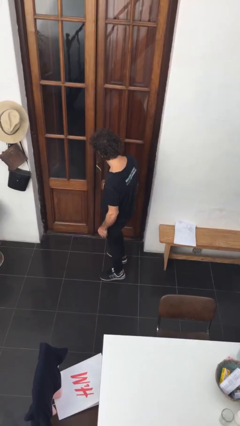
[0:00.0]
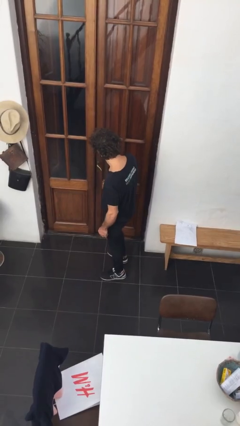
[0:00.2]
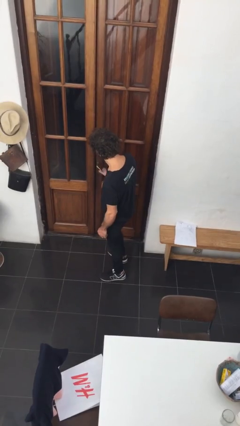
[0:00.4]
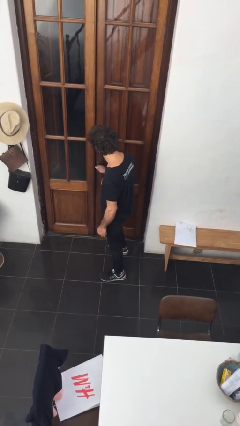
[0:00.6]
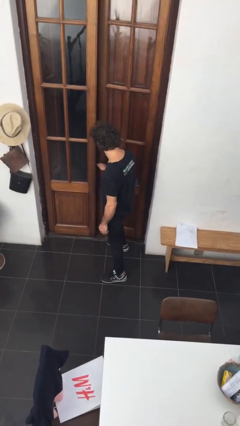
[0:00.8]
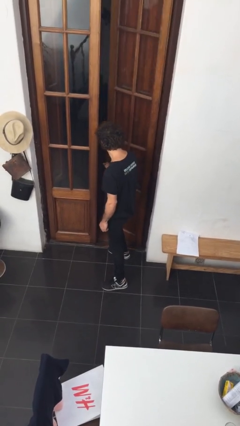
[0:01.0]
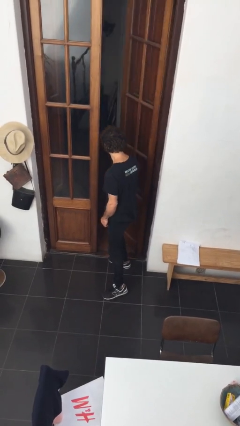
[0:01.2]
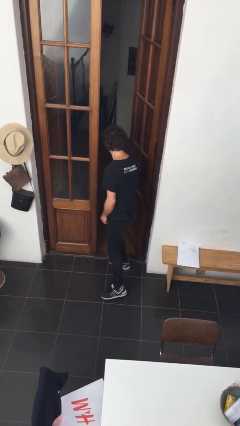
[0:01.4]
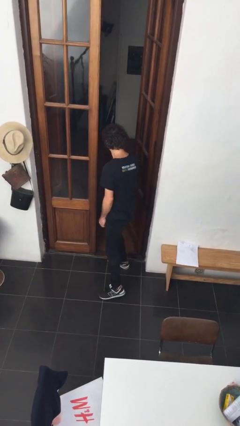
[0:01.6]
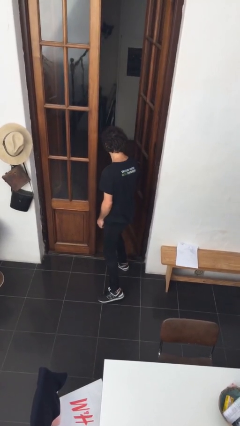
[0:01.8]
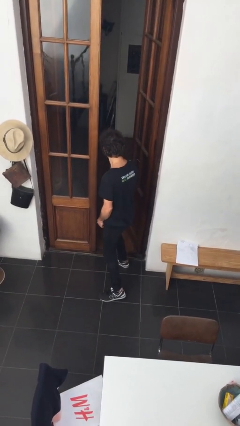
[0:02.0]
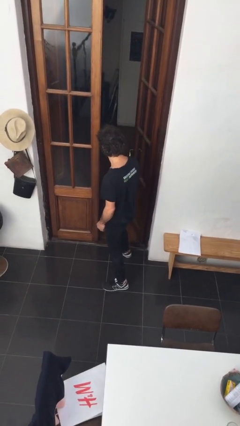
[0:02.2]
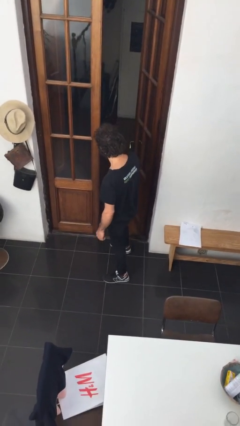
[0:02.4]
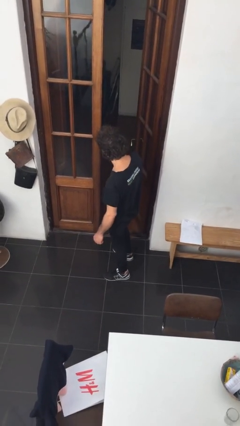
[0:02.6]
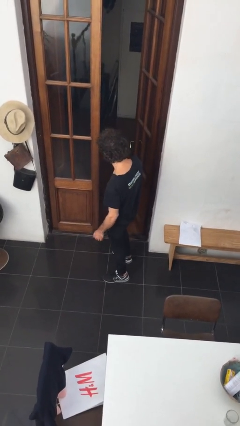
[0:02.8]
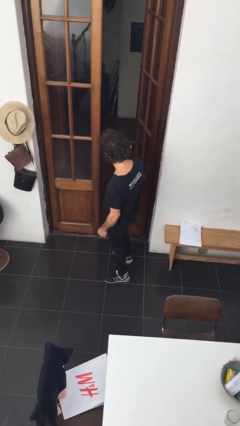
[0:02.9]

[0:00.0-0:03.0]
person opens facility door

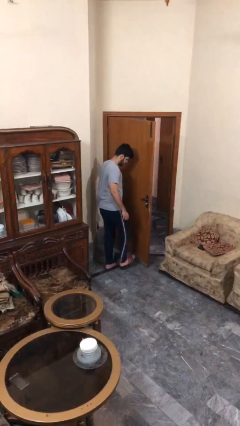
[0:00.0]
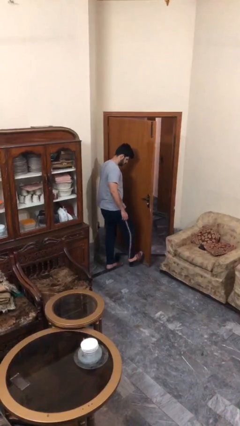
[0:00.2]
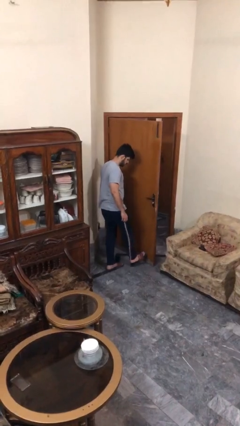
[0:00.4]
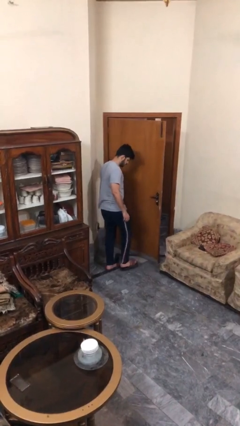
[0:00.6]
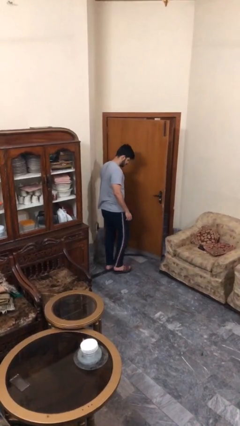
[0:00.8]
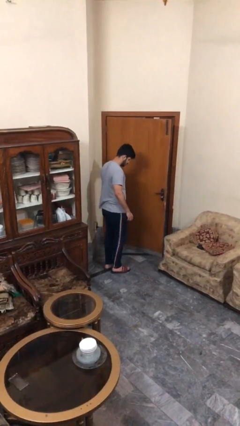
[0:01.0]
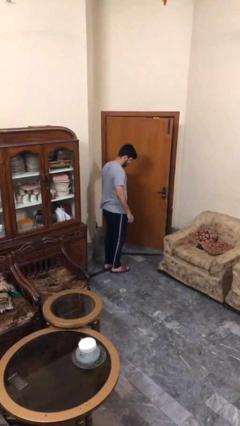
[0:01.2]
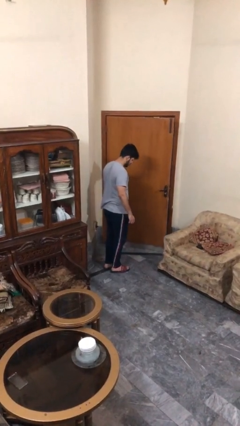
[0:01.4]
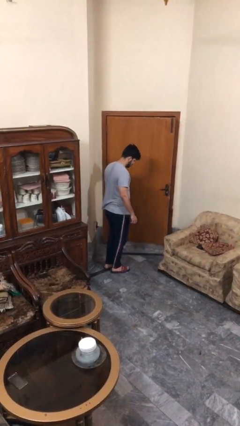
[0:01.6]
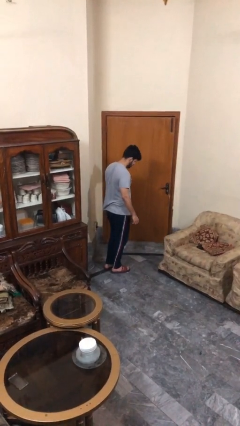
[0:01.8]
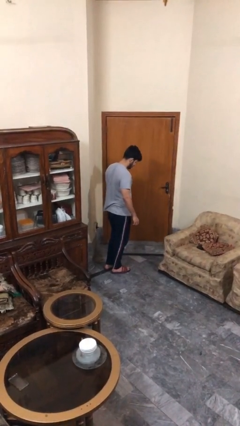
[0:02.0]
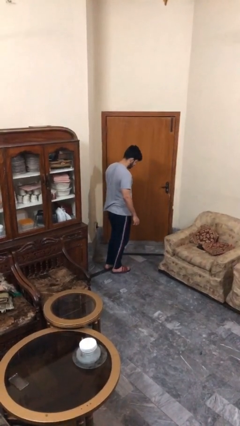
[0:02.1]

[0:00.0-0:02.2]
person closes door with foot

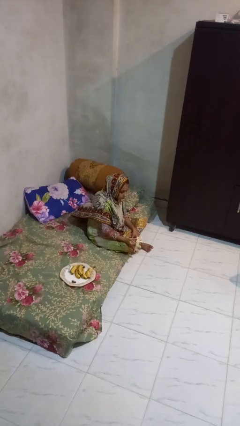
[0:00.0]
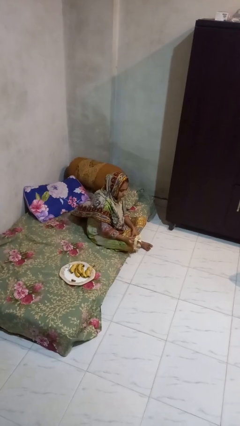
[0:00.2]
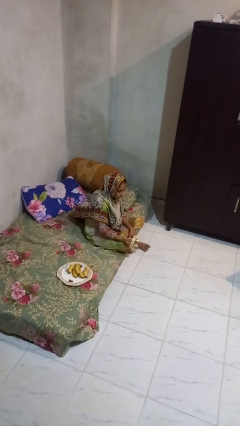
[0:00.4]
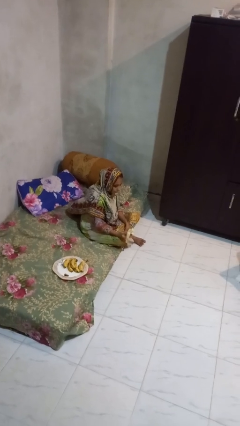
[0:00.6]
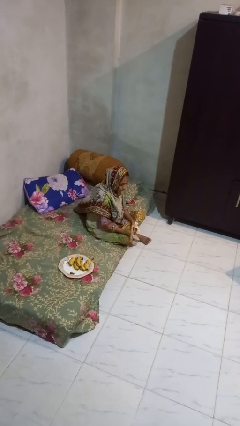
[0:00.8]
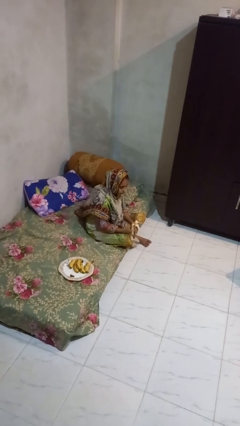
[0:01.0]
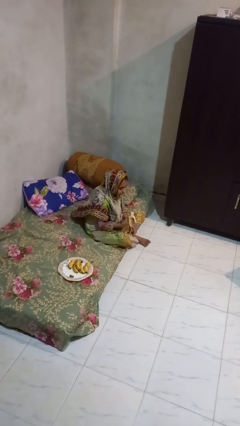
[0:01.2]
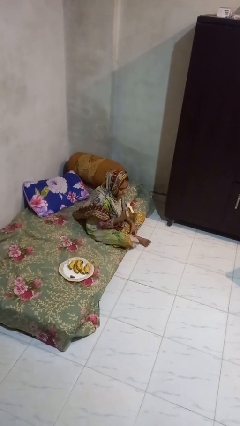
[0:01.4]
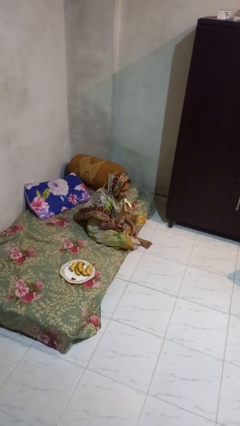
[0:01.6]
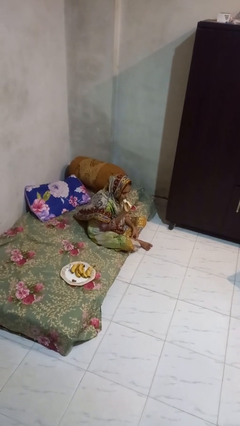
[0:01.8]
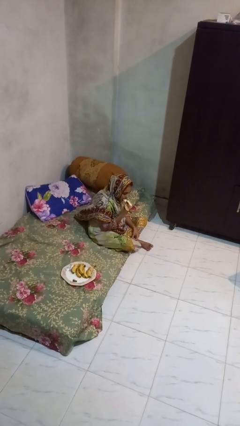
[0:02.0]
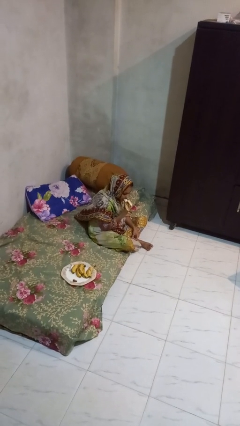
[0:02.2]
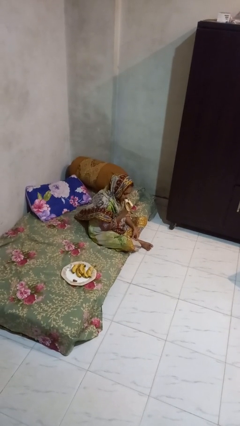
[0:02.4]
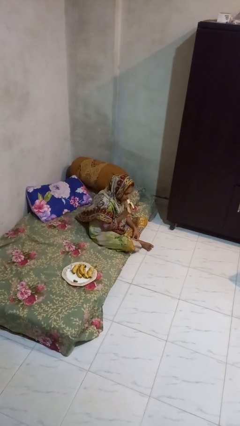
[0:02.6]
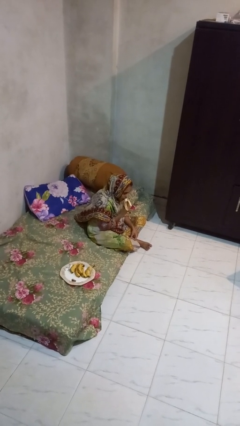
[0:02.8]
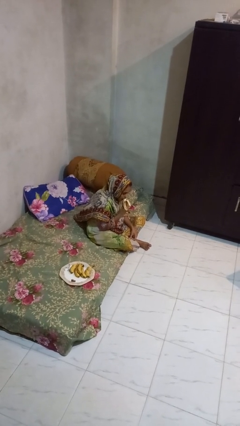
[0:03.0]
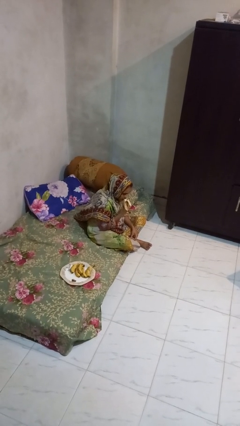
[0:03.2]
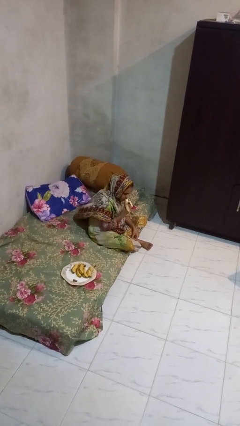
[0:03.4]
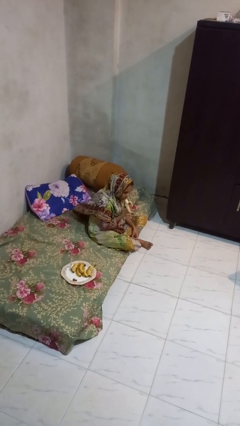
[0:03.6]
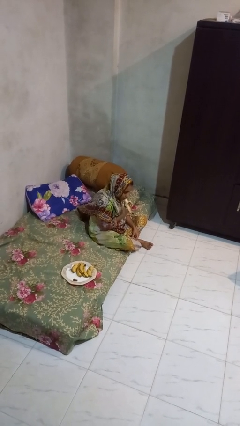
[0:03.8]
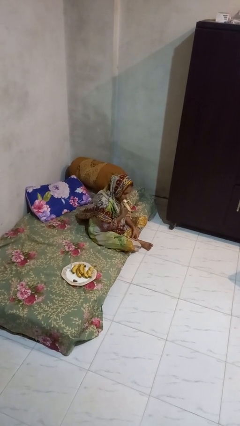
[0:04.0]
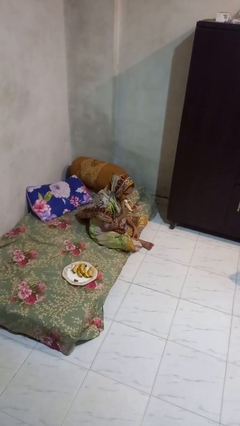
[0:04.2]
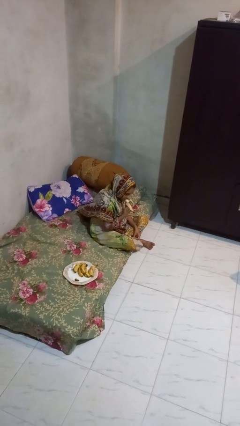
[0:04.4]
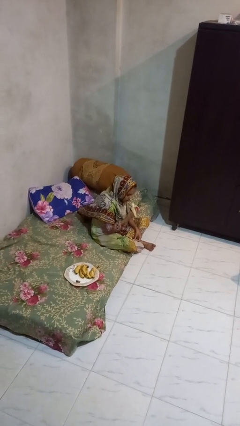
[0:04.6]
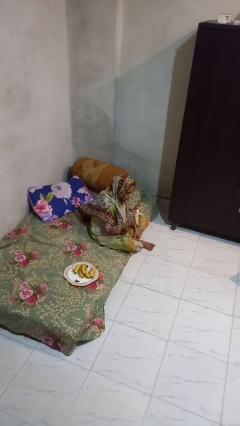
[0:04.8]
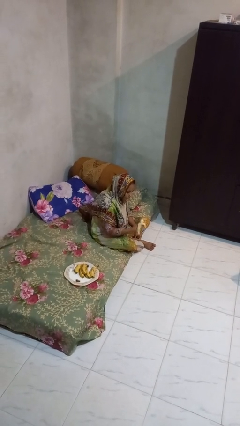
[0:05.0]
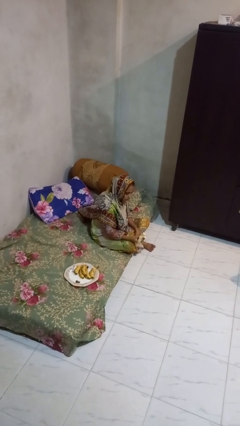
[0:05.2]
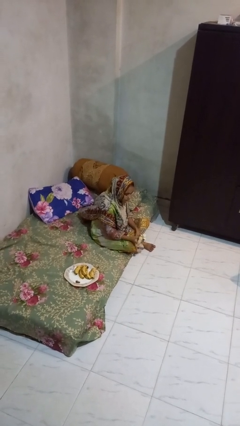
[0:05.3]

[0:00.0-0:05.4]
person eats banana

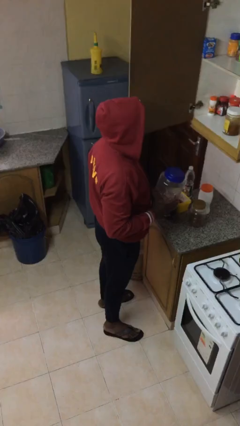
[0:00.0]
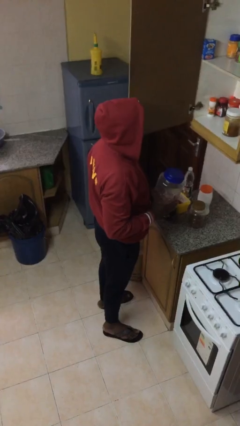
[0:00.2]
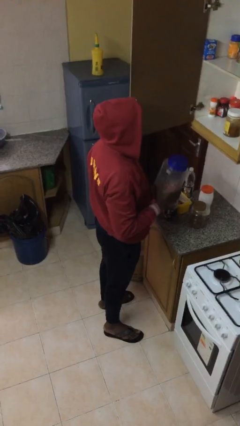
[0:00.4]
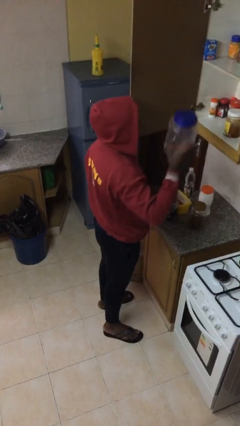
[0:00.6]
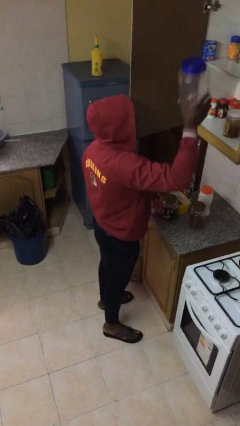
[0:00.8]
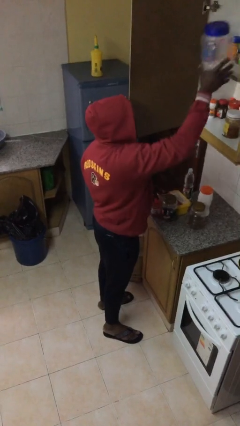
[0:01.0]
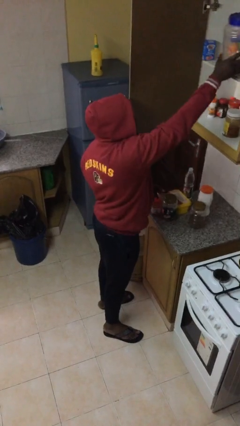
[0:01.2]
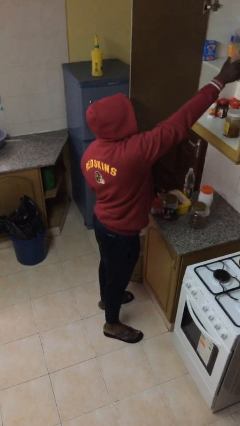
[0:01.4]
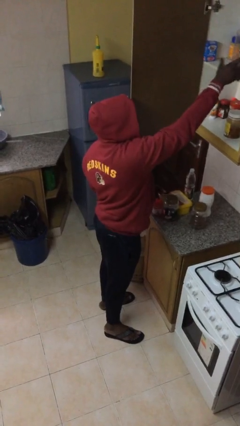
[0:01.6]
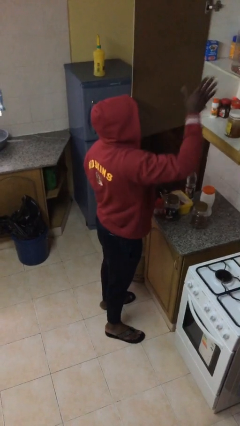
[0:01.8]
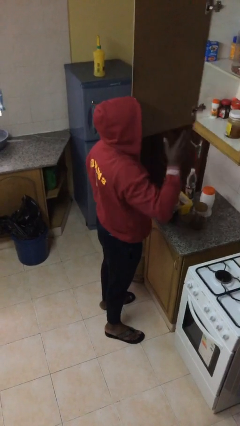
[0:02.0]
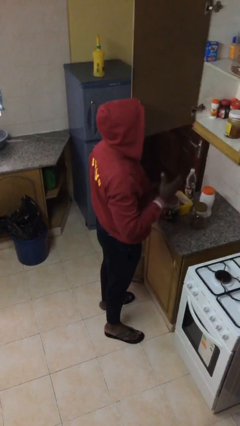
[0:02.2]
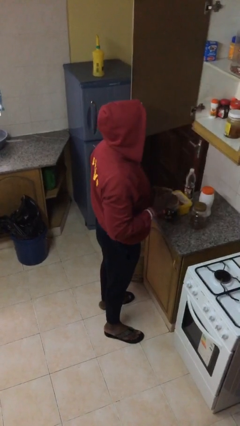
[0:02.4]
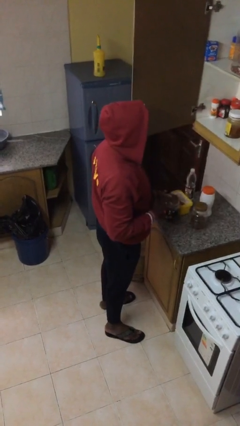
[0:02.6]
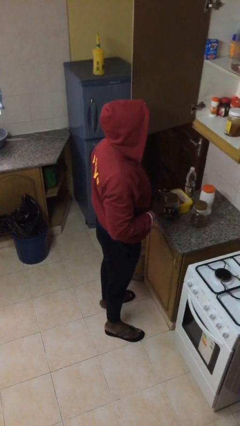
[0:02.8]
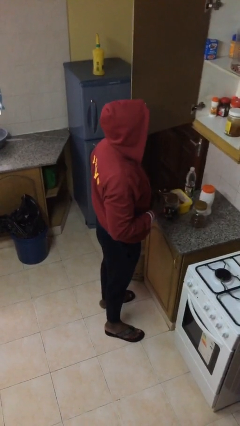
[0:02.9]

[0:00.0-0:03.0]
person puts down object on shelf

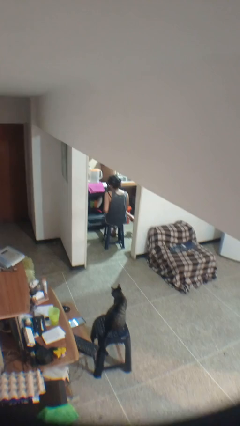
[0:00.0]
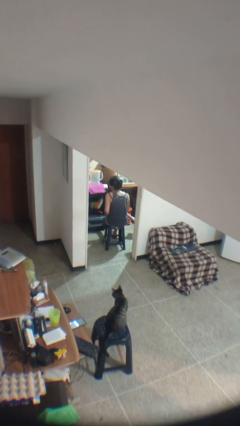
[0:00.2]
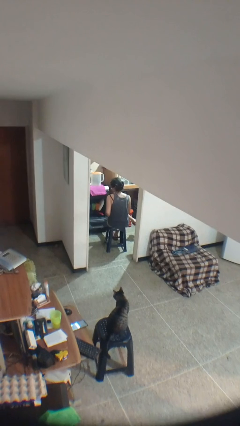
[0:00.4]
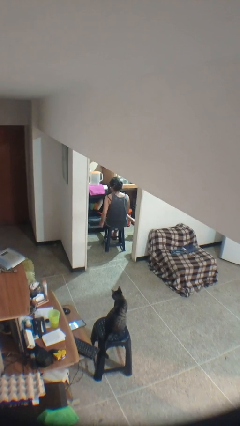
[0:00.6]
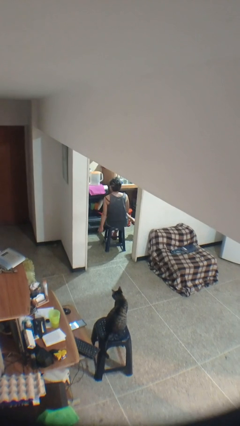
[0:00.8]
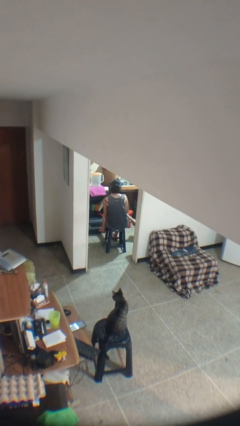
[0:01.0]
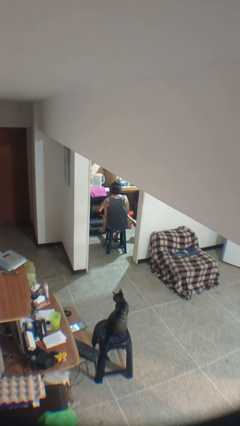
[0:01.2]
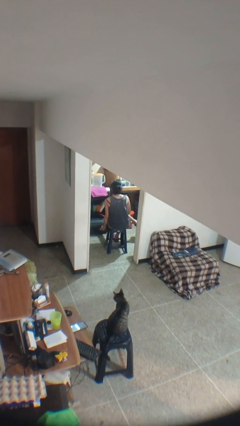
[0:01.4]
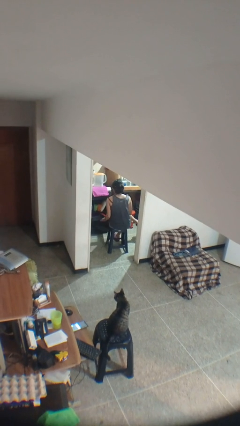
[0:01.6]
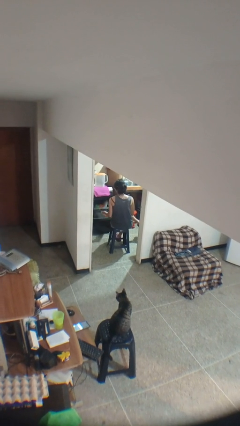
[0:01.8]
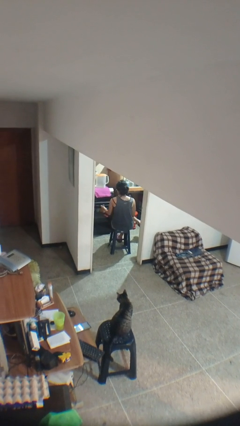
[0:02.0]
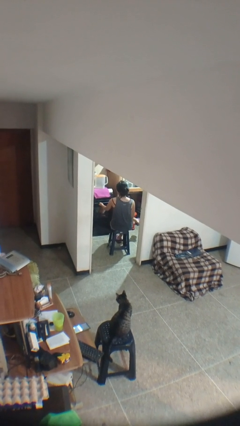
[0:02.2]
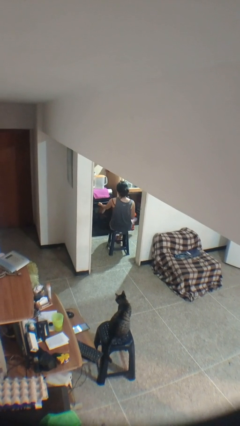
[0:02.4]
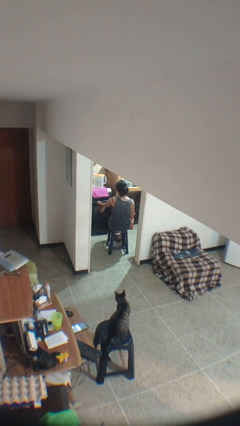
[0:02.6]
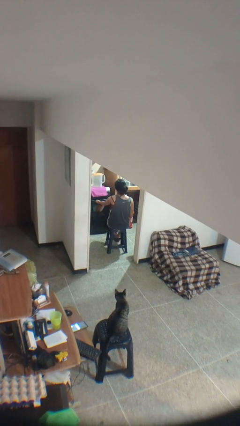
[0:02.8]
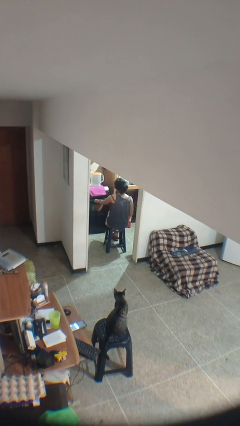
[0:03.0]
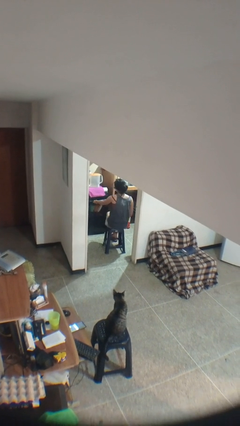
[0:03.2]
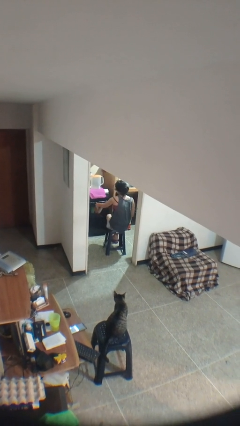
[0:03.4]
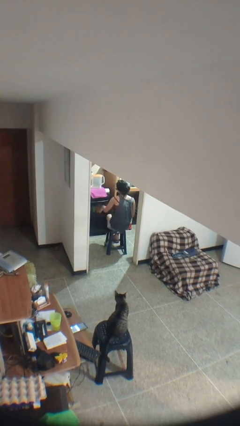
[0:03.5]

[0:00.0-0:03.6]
person closes dishwasher

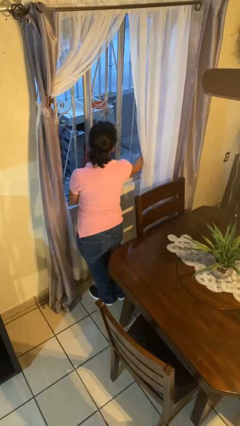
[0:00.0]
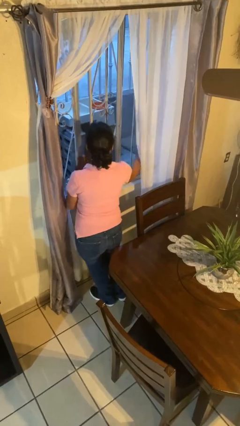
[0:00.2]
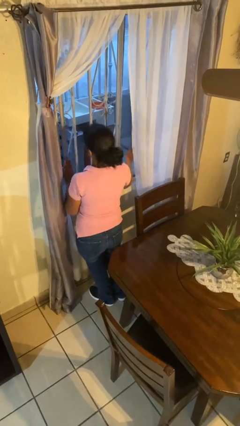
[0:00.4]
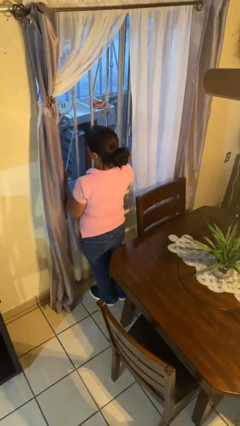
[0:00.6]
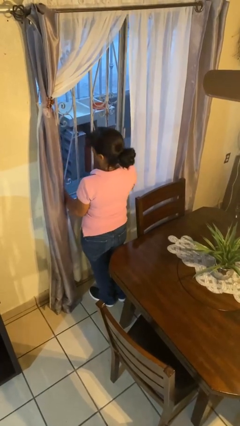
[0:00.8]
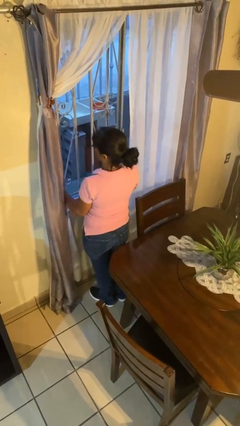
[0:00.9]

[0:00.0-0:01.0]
person closes home window
